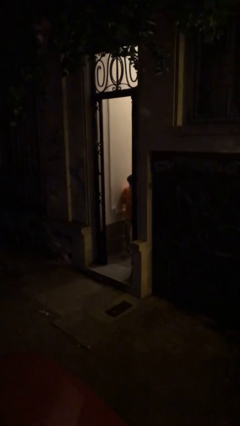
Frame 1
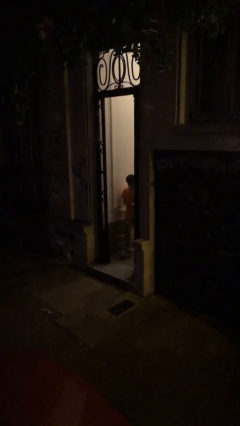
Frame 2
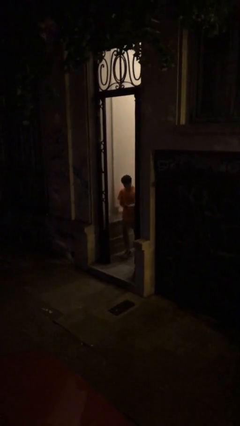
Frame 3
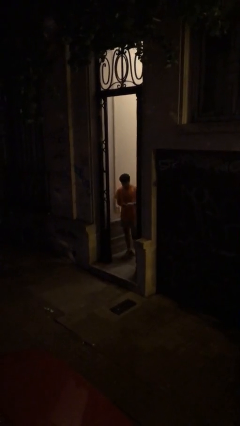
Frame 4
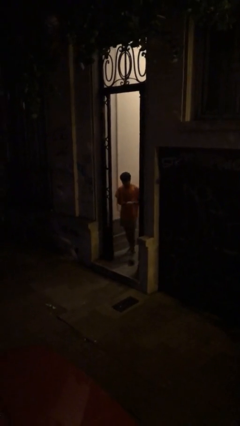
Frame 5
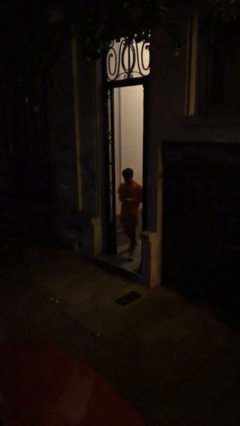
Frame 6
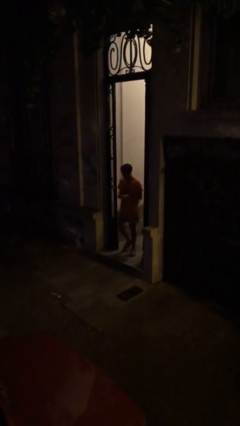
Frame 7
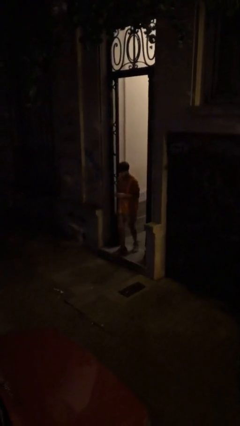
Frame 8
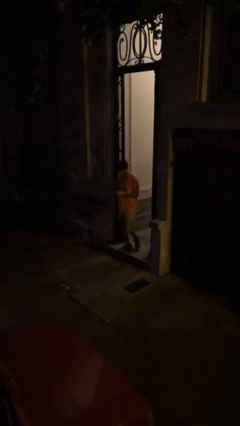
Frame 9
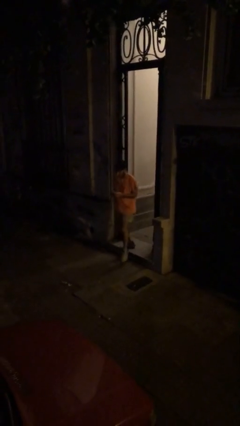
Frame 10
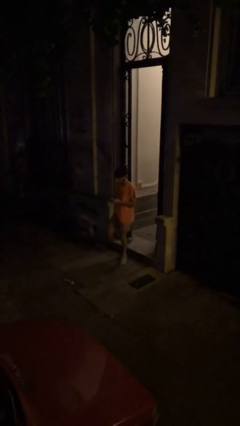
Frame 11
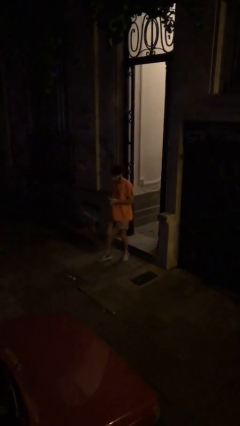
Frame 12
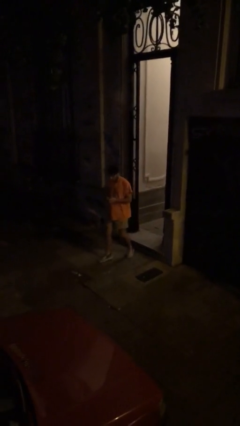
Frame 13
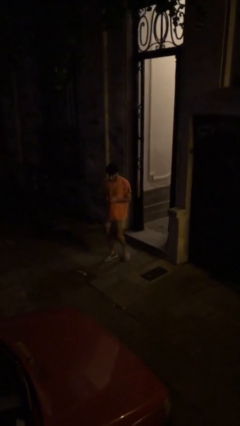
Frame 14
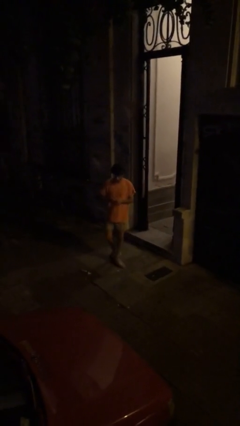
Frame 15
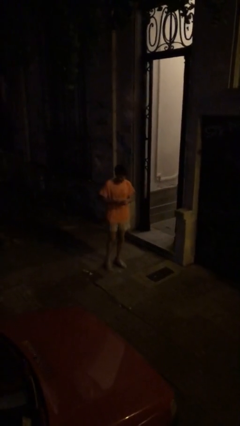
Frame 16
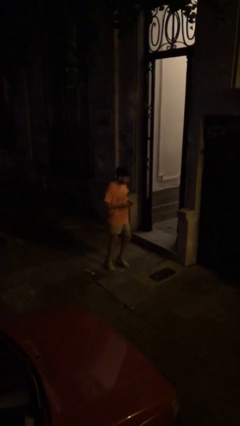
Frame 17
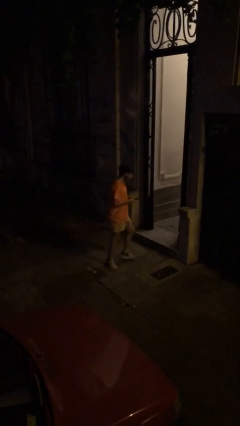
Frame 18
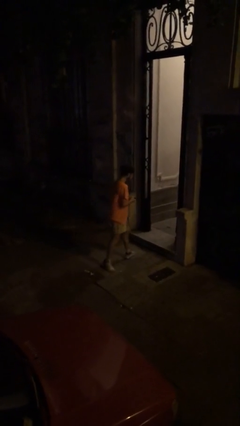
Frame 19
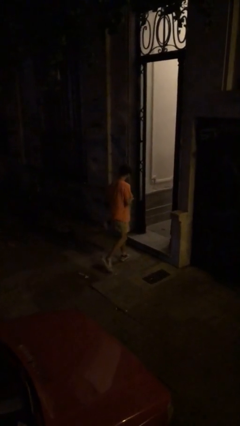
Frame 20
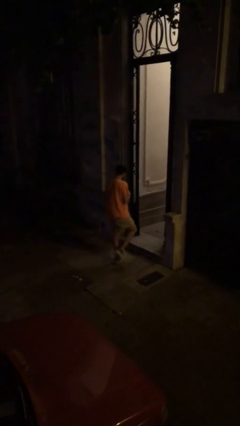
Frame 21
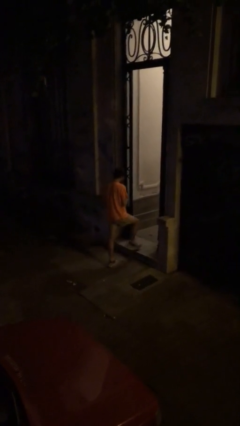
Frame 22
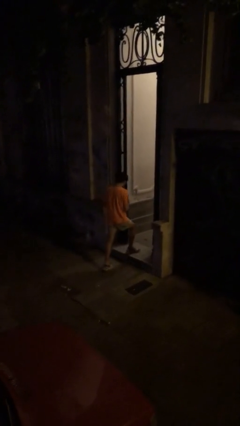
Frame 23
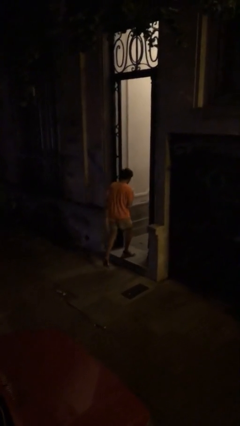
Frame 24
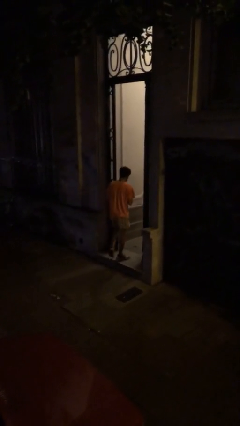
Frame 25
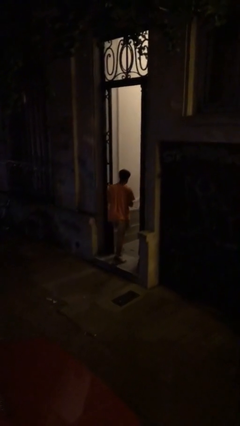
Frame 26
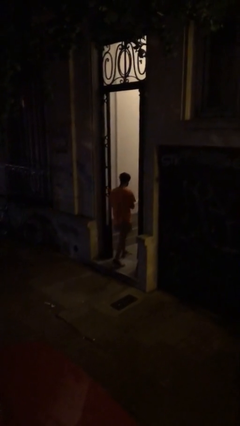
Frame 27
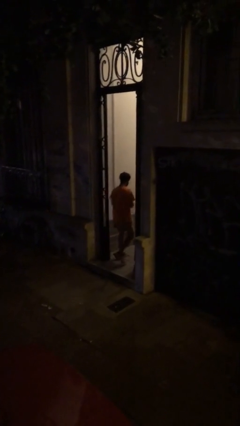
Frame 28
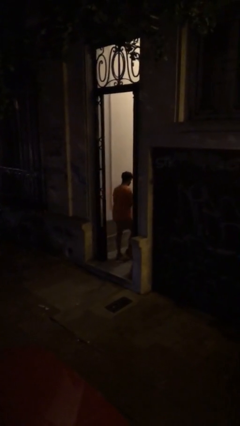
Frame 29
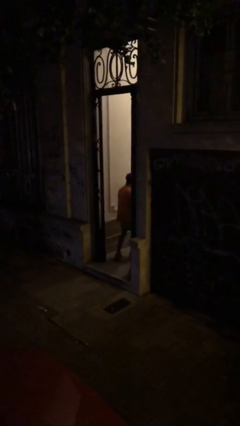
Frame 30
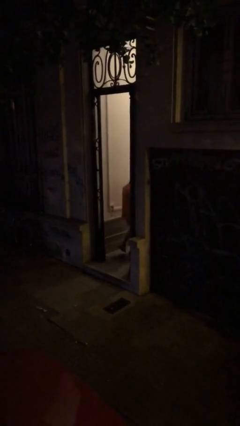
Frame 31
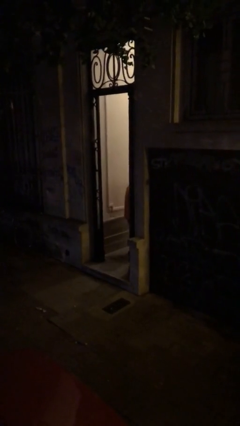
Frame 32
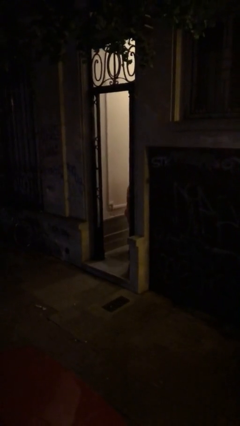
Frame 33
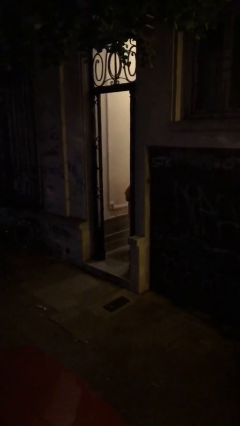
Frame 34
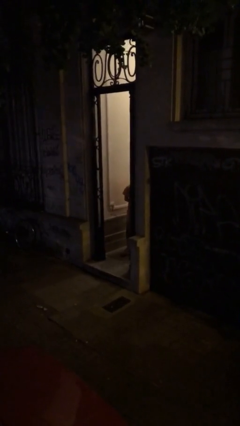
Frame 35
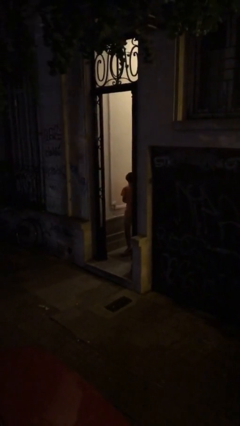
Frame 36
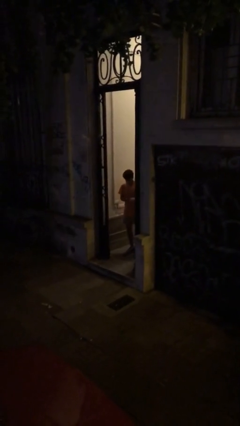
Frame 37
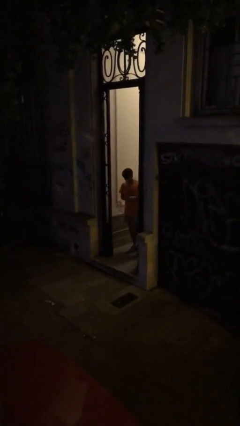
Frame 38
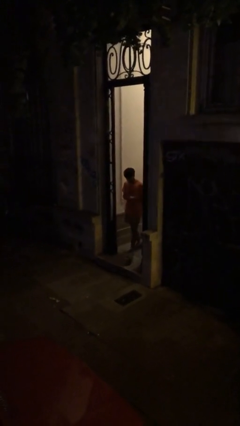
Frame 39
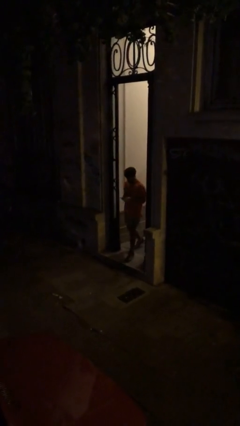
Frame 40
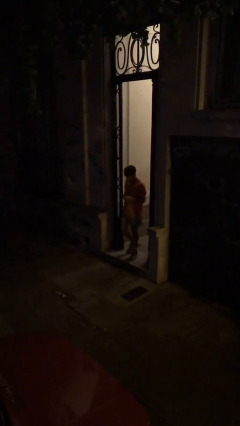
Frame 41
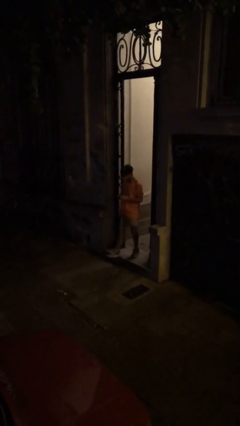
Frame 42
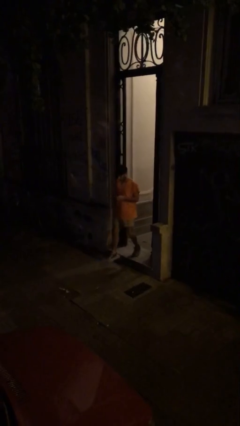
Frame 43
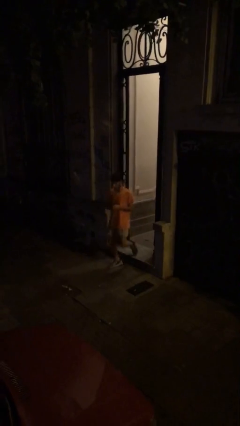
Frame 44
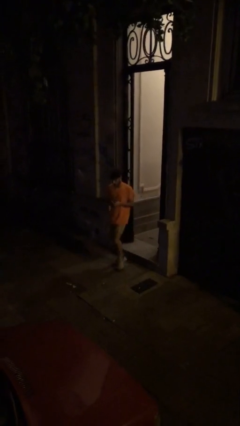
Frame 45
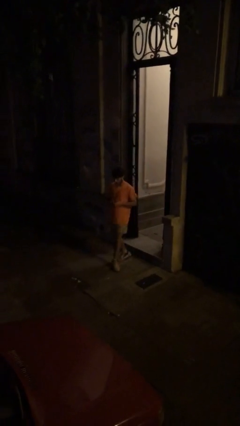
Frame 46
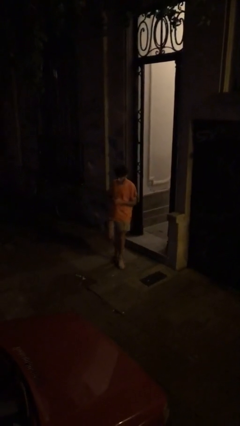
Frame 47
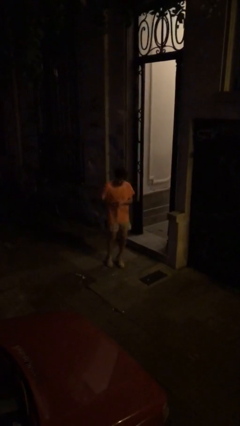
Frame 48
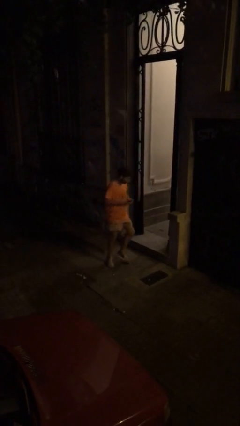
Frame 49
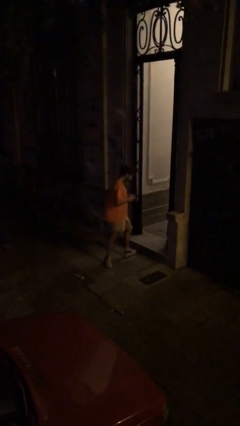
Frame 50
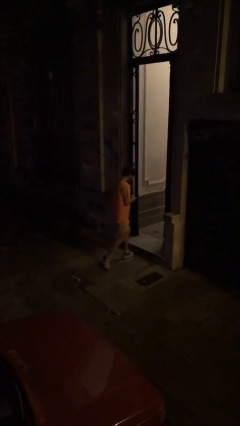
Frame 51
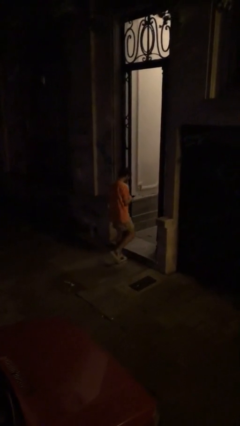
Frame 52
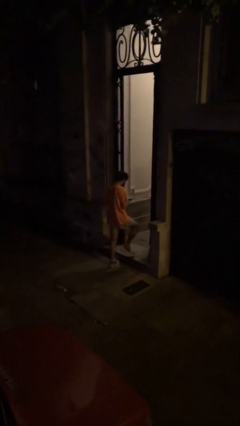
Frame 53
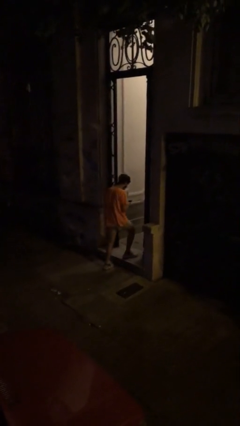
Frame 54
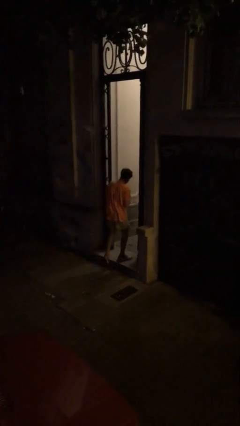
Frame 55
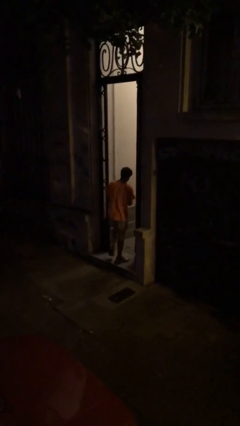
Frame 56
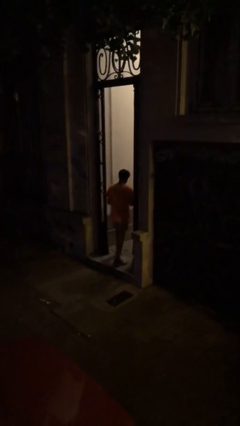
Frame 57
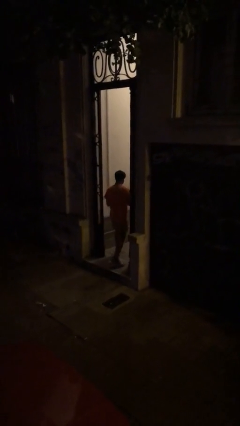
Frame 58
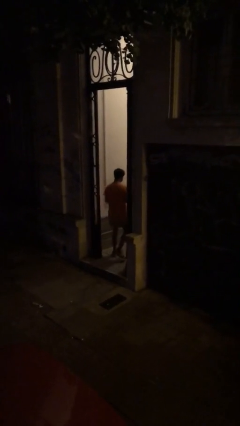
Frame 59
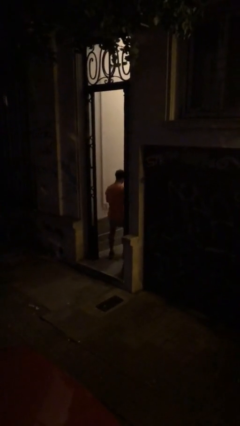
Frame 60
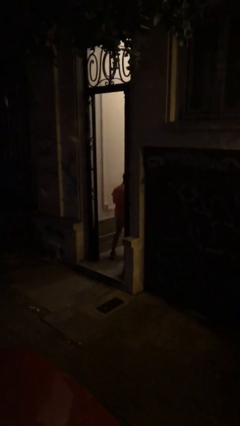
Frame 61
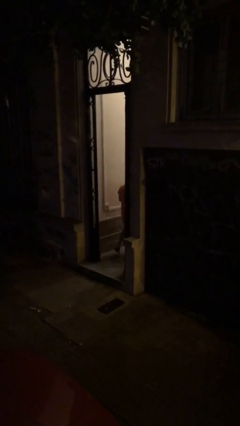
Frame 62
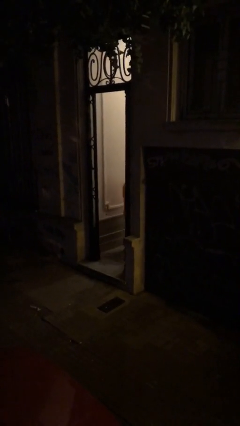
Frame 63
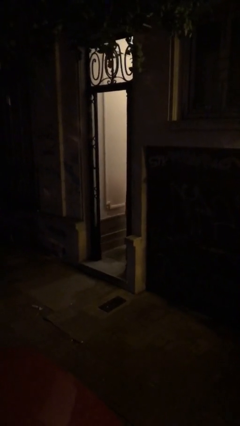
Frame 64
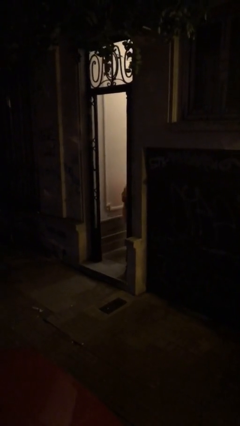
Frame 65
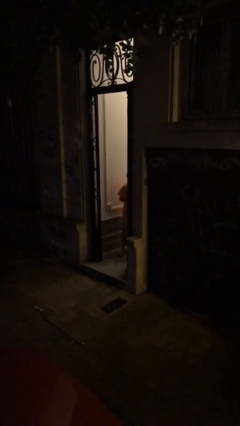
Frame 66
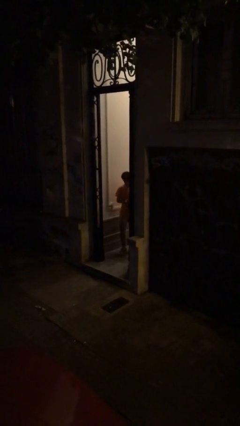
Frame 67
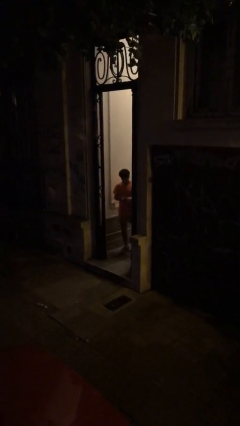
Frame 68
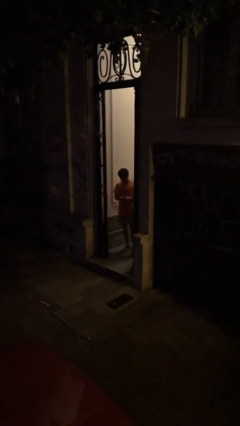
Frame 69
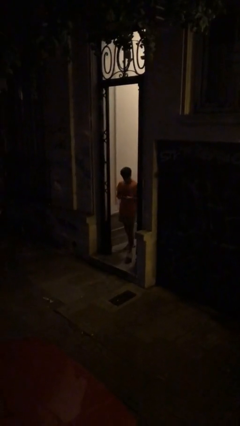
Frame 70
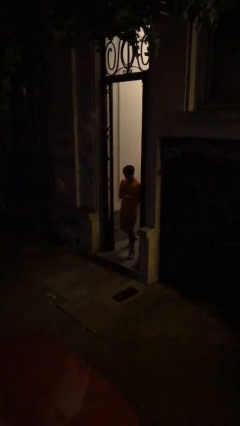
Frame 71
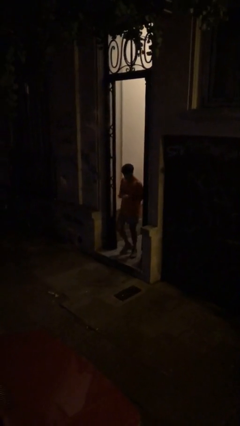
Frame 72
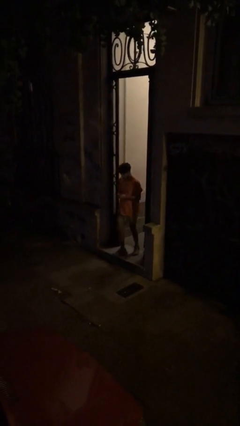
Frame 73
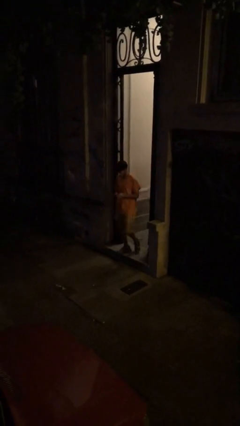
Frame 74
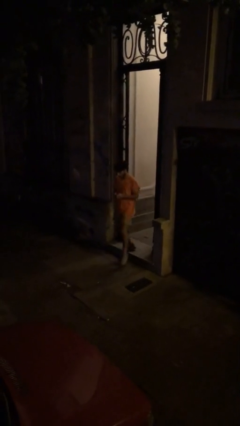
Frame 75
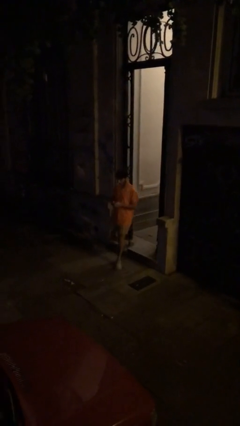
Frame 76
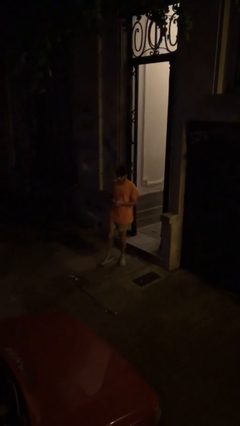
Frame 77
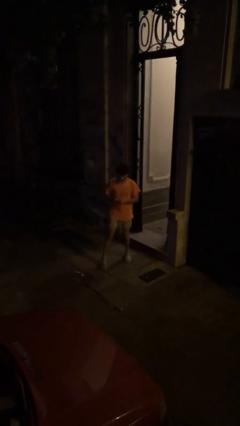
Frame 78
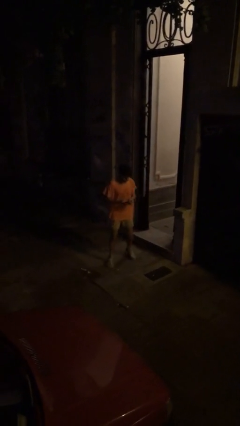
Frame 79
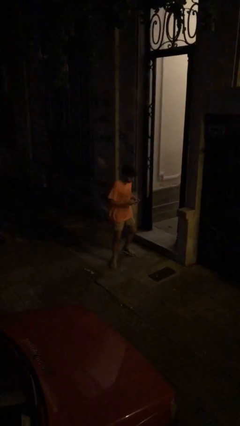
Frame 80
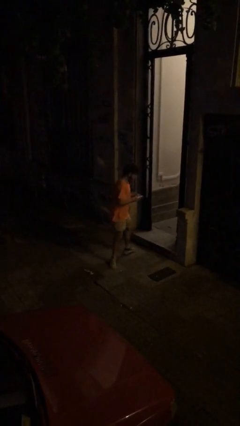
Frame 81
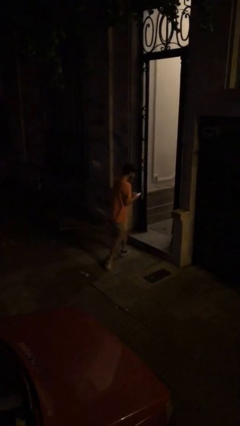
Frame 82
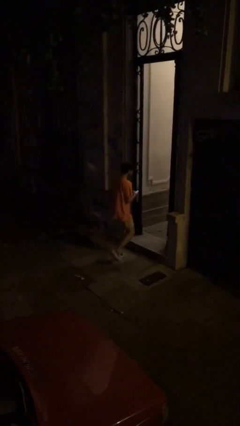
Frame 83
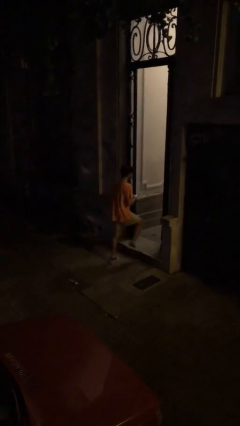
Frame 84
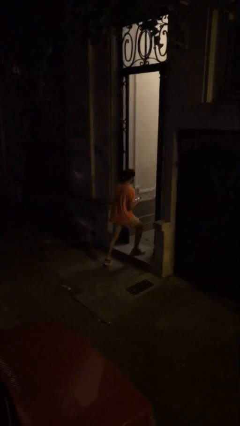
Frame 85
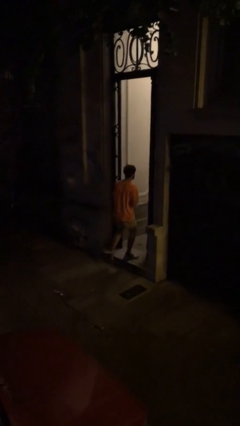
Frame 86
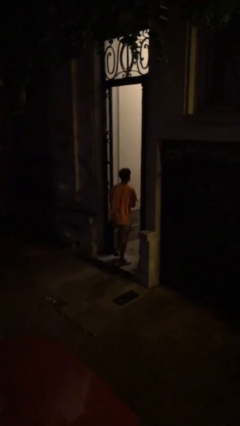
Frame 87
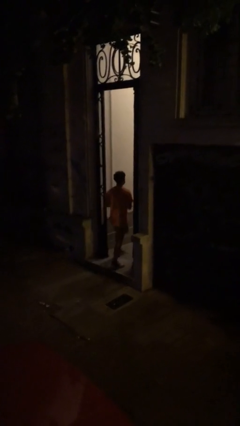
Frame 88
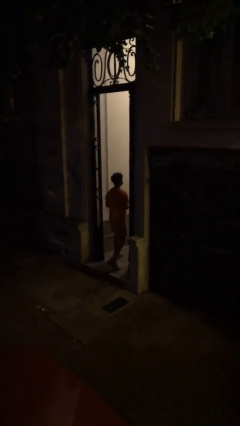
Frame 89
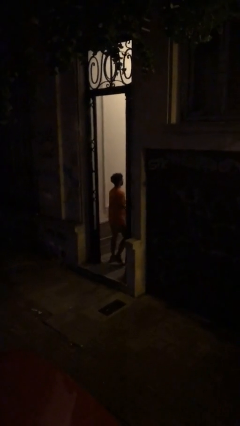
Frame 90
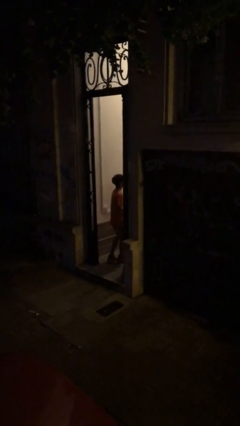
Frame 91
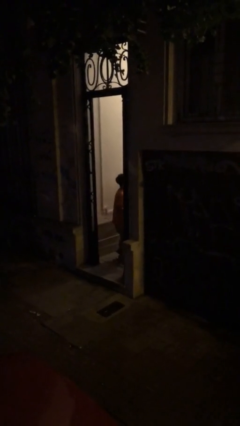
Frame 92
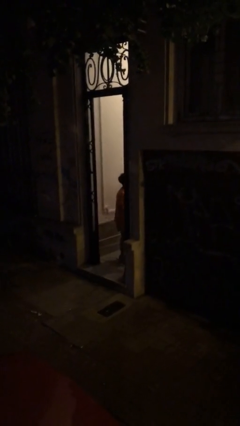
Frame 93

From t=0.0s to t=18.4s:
person texts on phone
